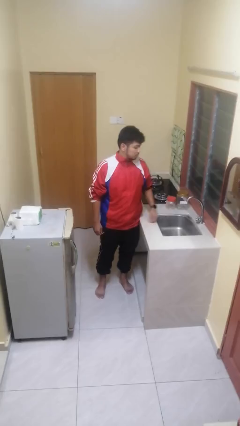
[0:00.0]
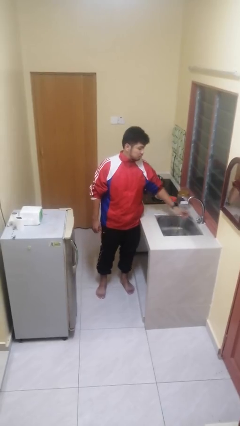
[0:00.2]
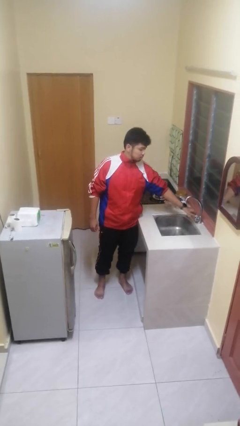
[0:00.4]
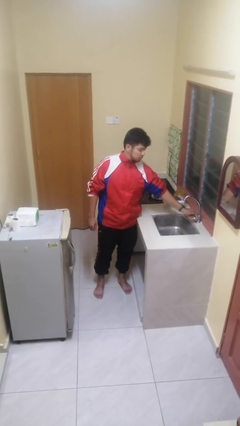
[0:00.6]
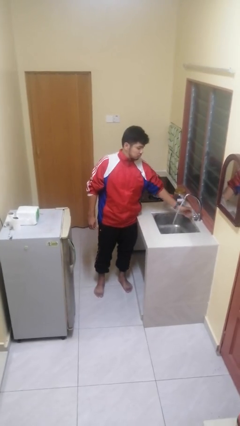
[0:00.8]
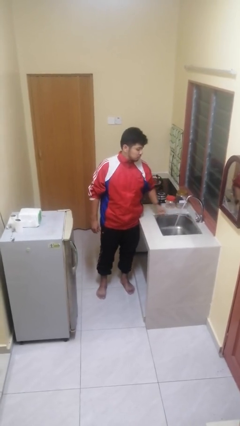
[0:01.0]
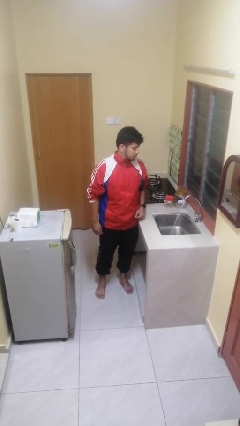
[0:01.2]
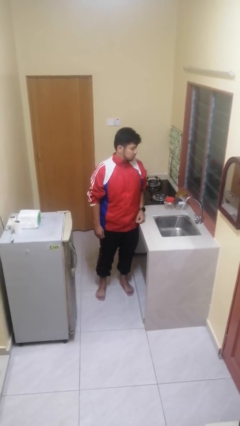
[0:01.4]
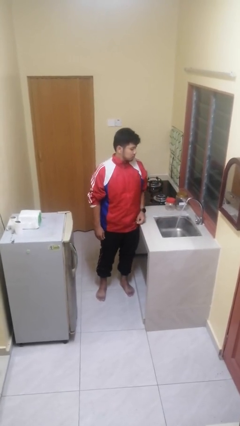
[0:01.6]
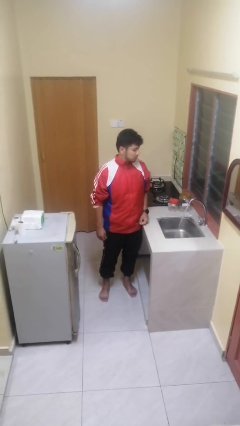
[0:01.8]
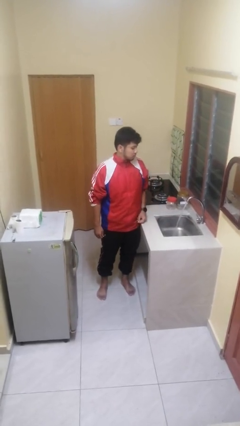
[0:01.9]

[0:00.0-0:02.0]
person turns on faucet

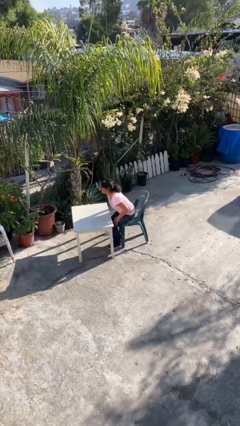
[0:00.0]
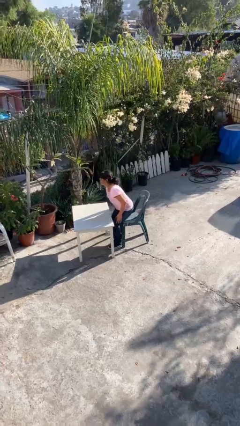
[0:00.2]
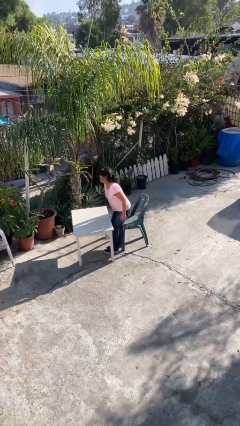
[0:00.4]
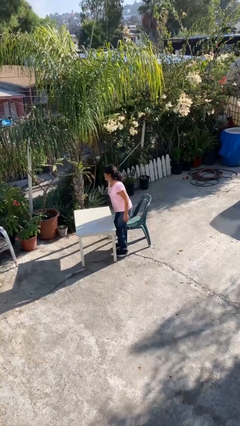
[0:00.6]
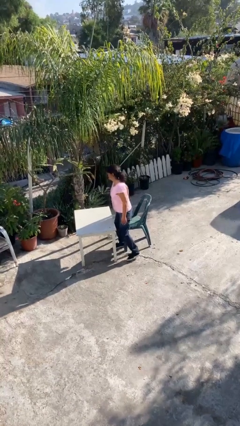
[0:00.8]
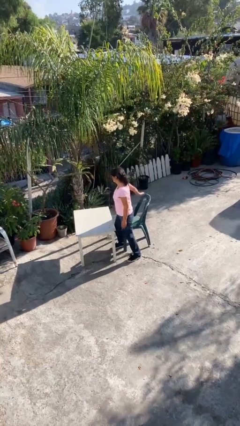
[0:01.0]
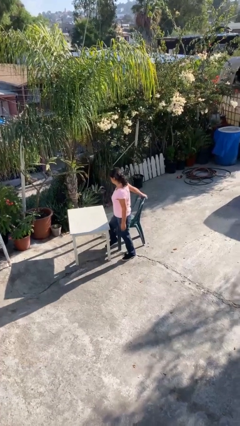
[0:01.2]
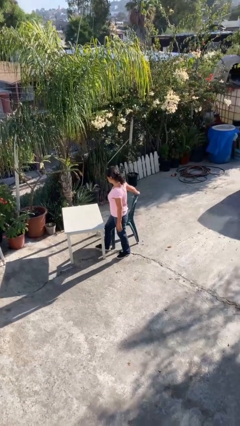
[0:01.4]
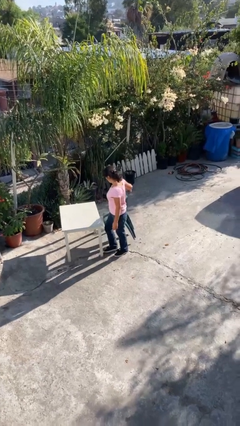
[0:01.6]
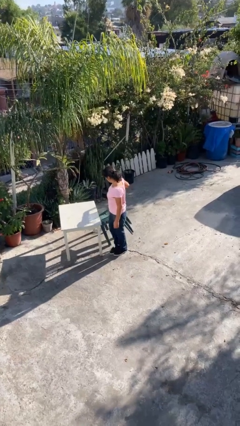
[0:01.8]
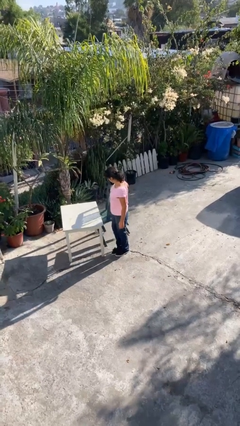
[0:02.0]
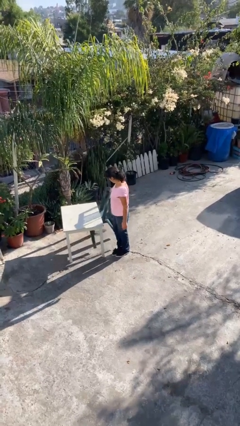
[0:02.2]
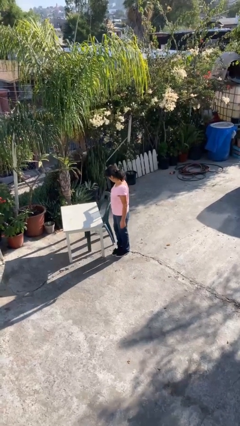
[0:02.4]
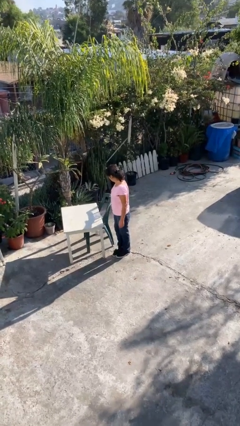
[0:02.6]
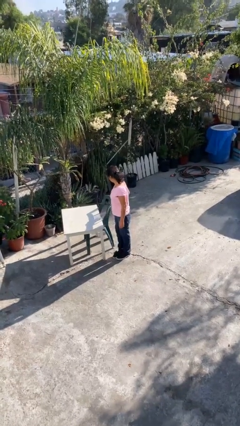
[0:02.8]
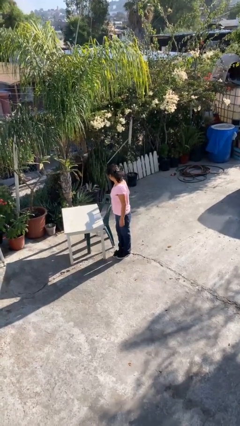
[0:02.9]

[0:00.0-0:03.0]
person stands up

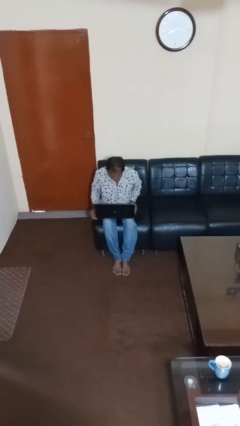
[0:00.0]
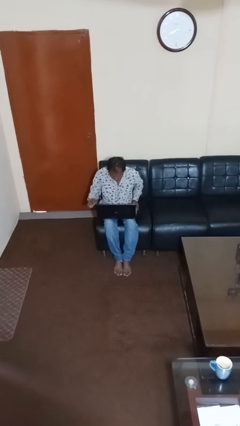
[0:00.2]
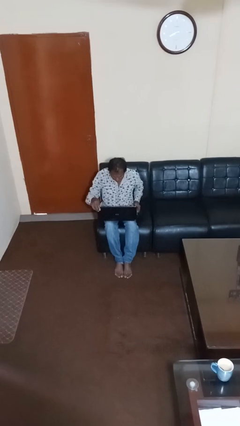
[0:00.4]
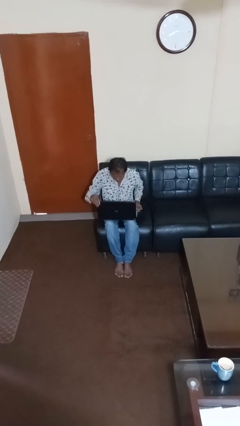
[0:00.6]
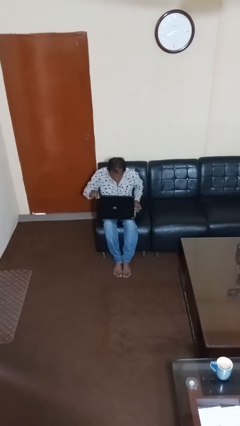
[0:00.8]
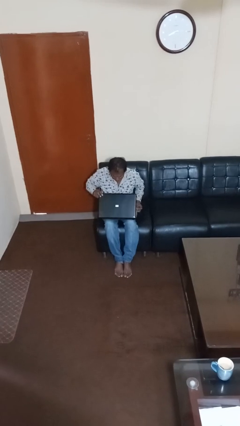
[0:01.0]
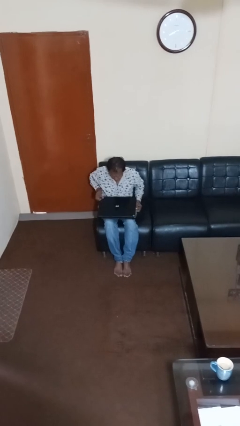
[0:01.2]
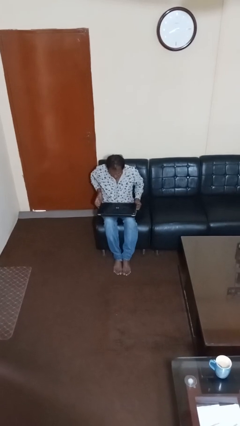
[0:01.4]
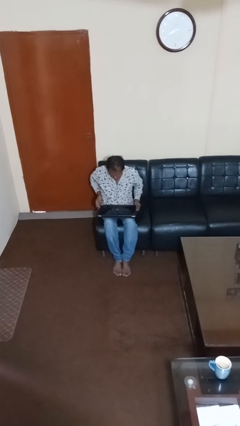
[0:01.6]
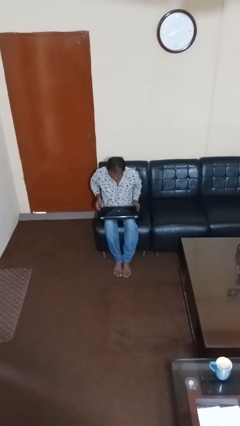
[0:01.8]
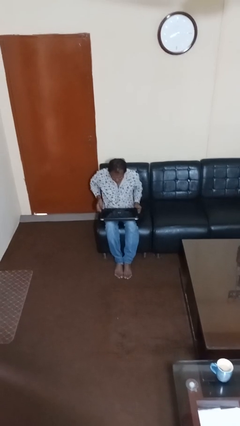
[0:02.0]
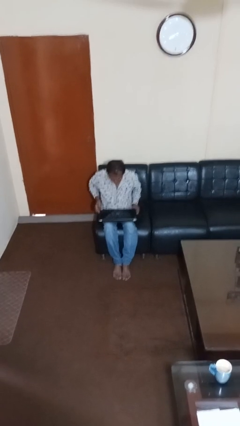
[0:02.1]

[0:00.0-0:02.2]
person closes laptop

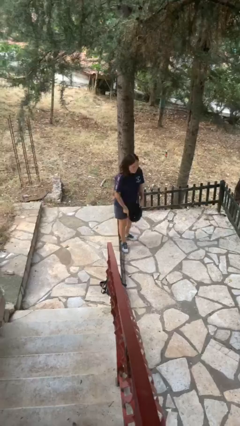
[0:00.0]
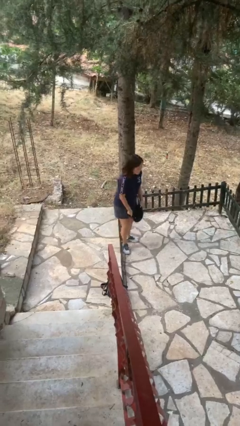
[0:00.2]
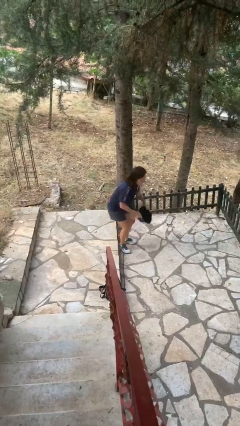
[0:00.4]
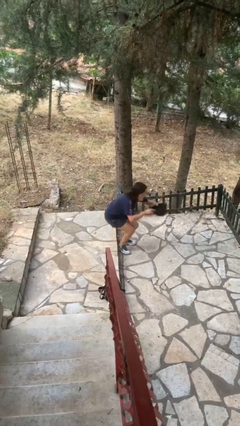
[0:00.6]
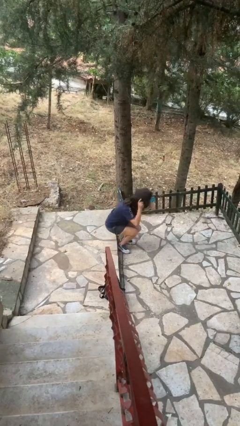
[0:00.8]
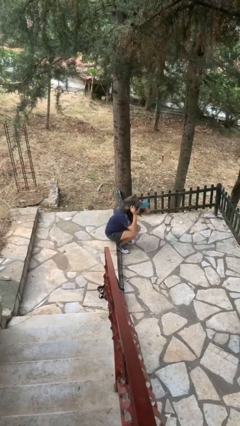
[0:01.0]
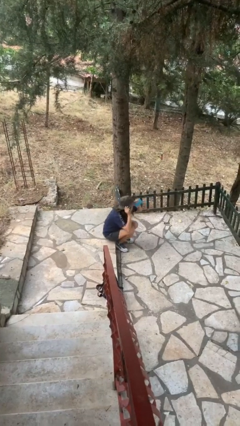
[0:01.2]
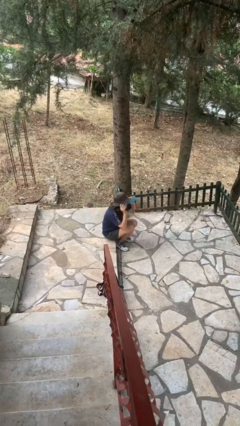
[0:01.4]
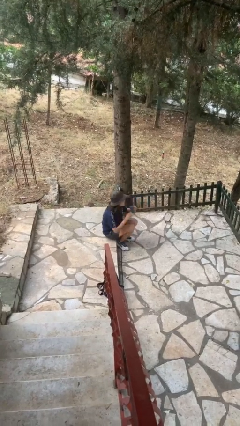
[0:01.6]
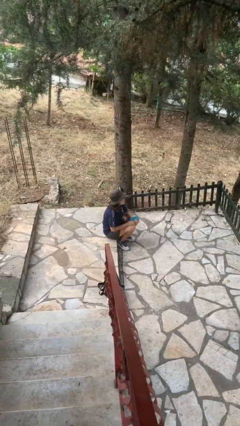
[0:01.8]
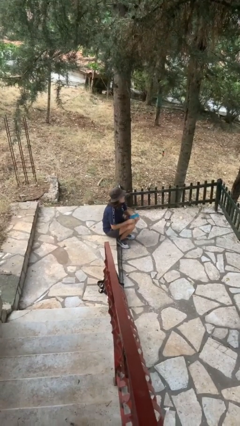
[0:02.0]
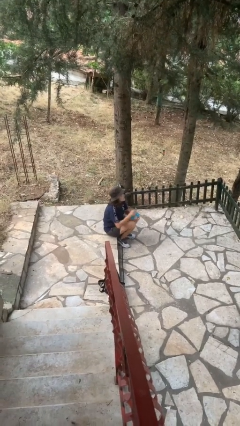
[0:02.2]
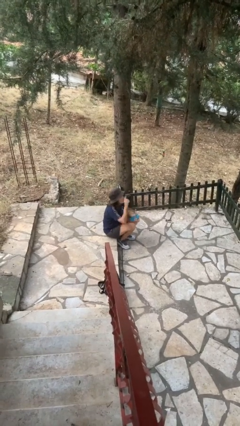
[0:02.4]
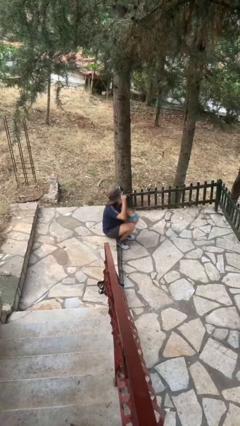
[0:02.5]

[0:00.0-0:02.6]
person puts on hat

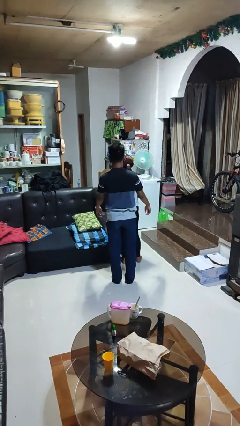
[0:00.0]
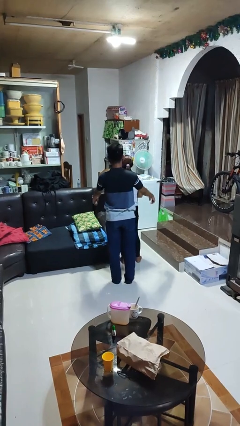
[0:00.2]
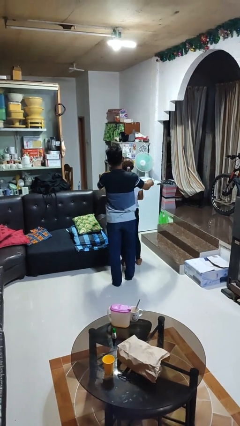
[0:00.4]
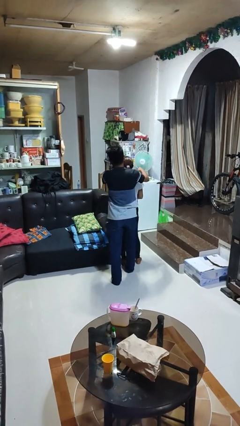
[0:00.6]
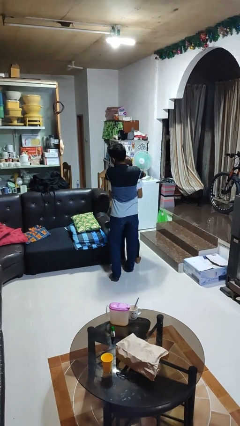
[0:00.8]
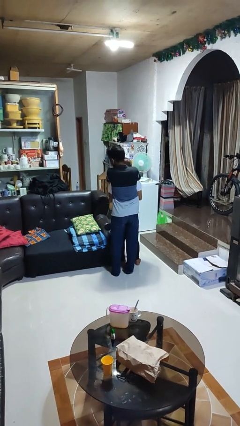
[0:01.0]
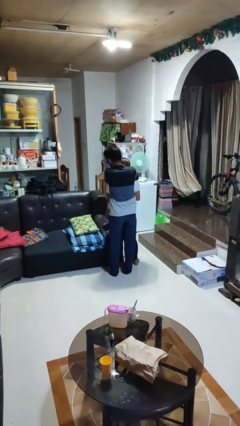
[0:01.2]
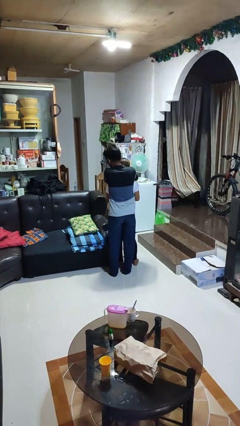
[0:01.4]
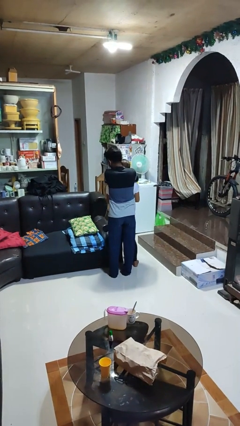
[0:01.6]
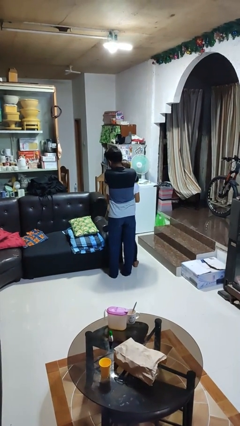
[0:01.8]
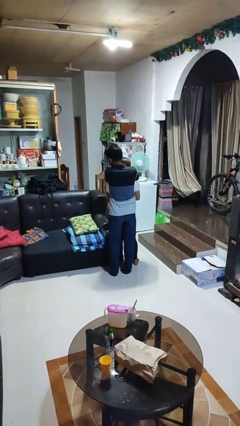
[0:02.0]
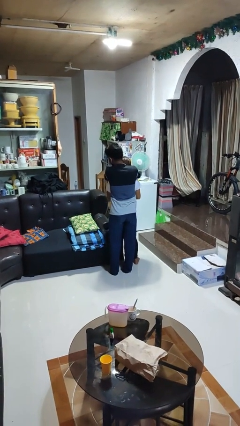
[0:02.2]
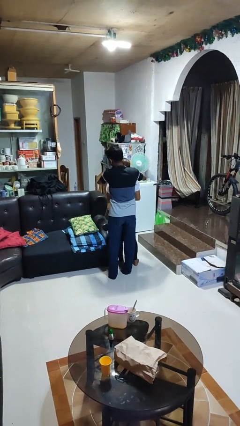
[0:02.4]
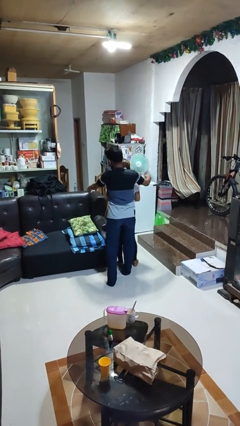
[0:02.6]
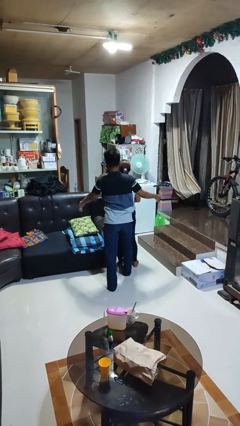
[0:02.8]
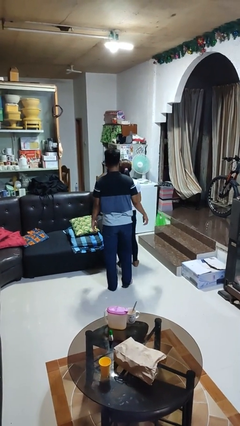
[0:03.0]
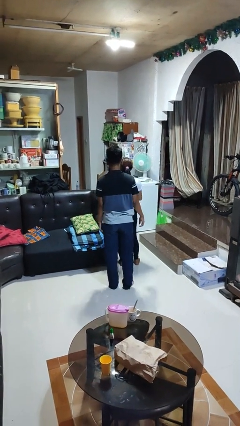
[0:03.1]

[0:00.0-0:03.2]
person hugs person from behind

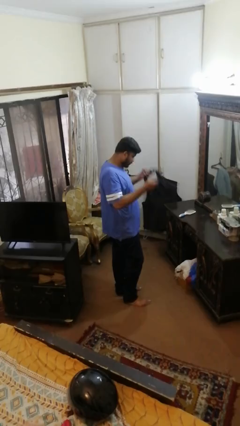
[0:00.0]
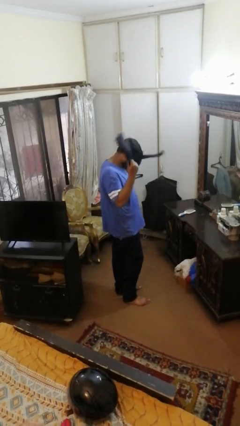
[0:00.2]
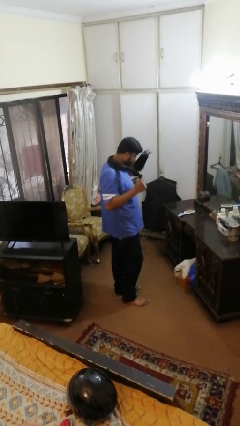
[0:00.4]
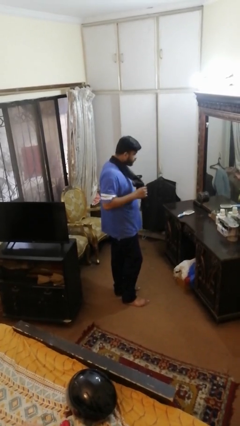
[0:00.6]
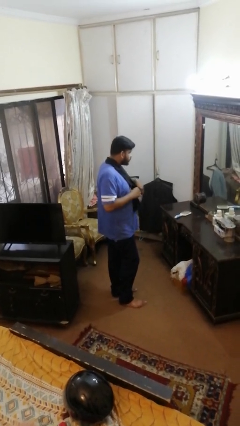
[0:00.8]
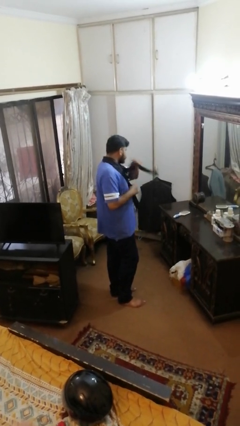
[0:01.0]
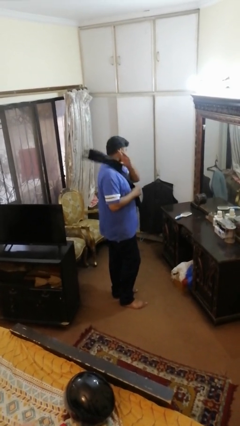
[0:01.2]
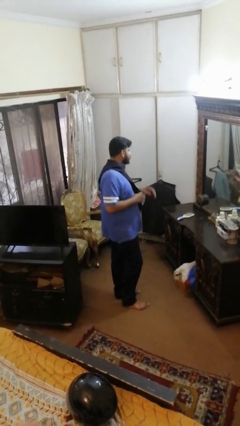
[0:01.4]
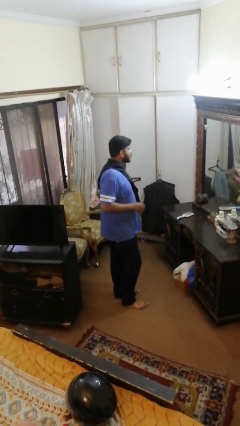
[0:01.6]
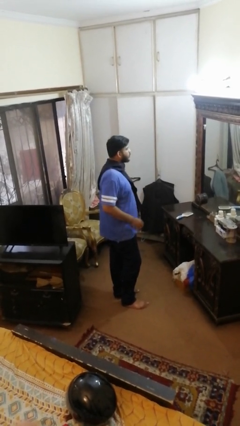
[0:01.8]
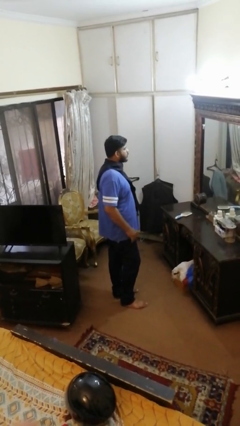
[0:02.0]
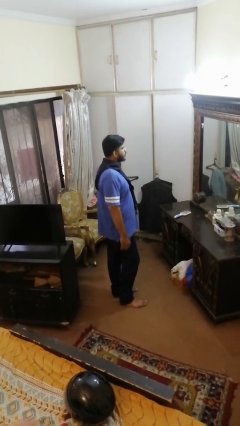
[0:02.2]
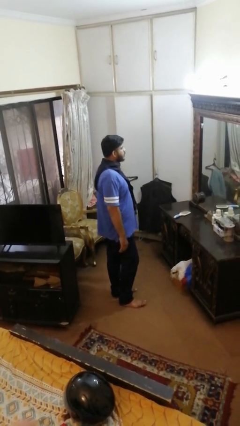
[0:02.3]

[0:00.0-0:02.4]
person puts on scarf

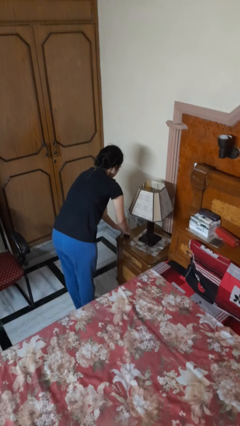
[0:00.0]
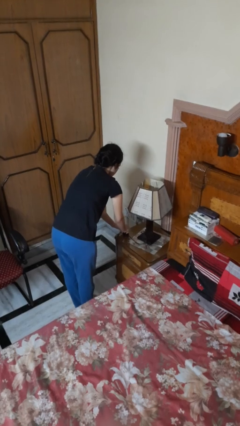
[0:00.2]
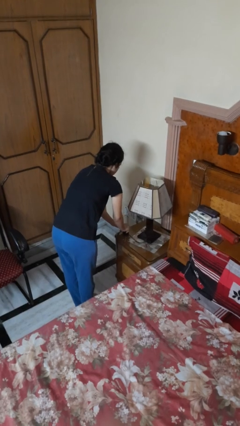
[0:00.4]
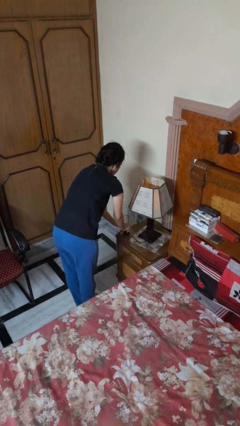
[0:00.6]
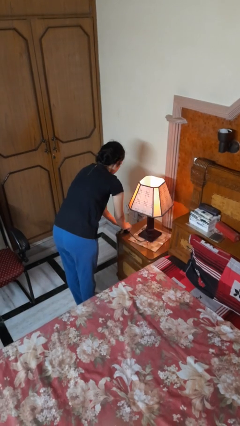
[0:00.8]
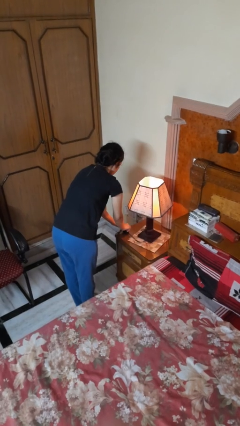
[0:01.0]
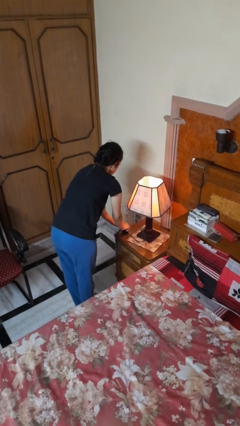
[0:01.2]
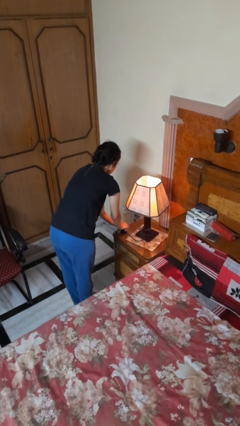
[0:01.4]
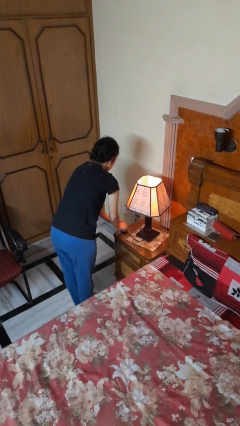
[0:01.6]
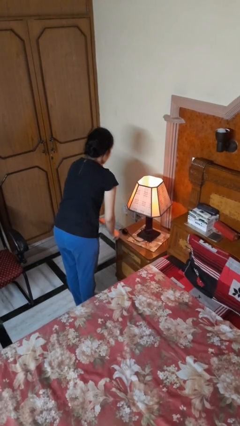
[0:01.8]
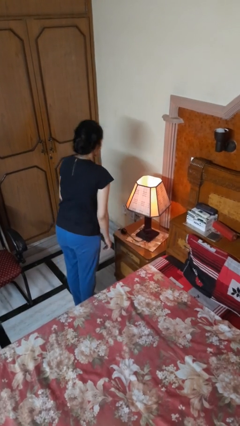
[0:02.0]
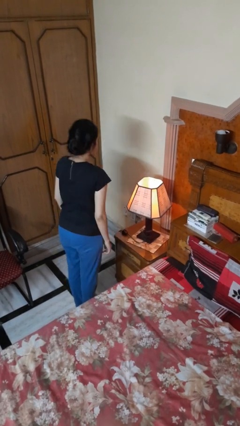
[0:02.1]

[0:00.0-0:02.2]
person turns on lamp
